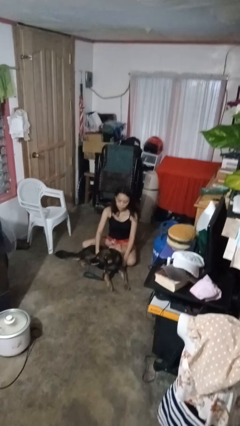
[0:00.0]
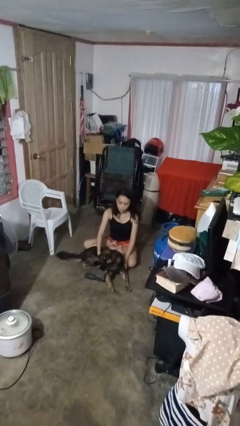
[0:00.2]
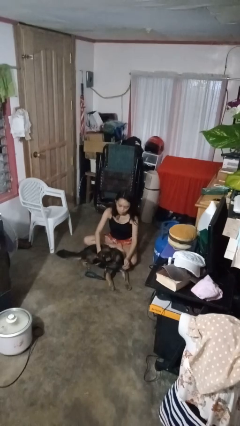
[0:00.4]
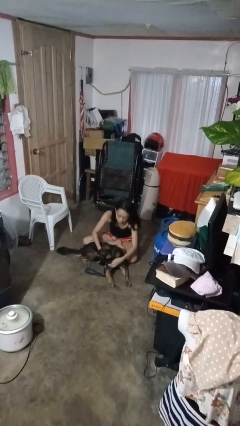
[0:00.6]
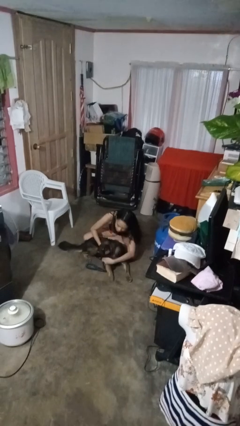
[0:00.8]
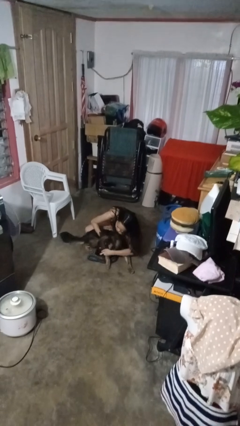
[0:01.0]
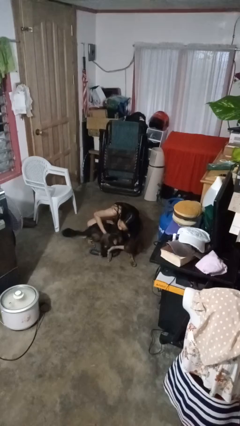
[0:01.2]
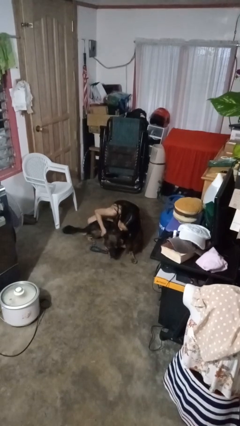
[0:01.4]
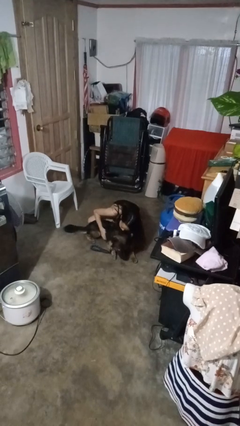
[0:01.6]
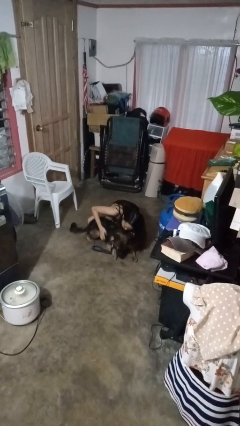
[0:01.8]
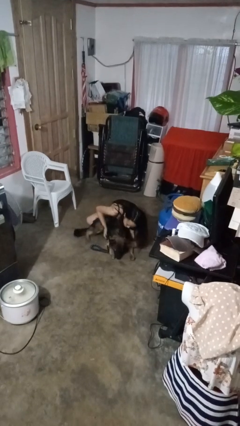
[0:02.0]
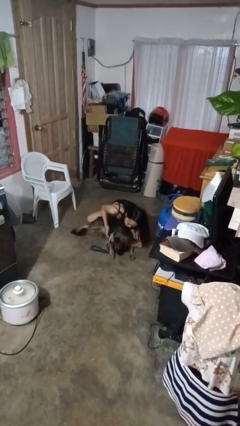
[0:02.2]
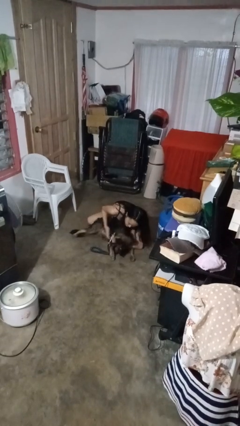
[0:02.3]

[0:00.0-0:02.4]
person hugs dog

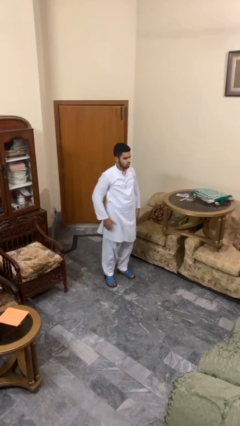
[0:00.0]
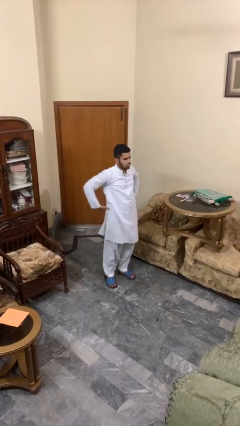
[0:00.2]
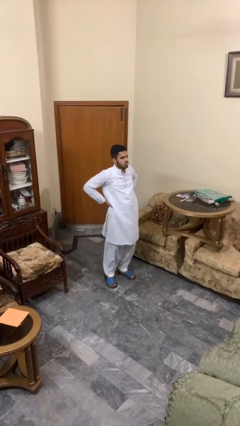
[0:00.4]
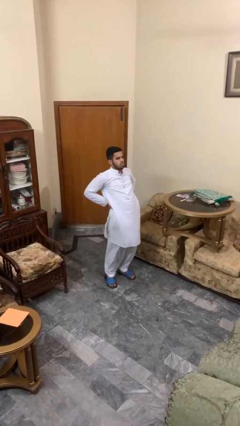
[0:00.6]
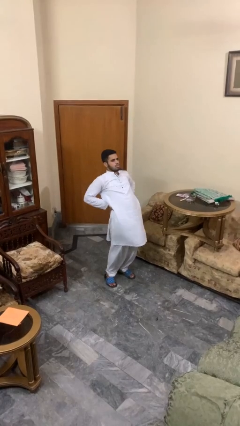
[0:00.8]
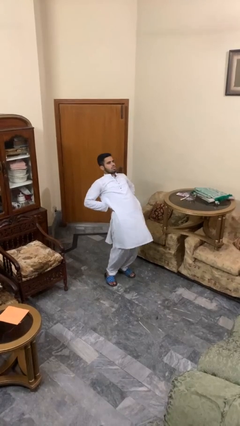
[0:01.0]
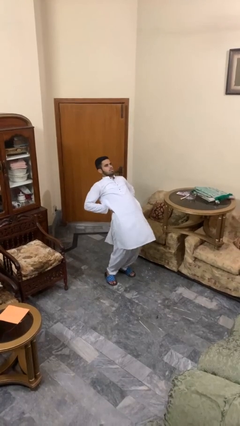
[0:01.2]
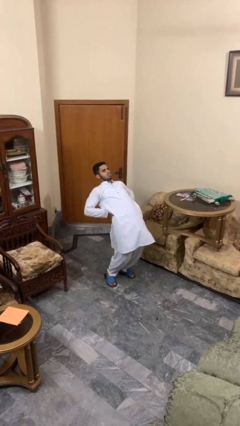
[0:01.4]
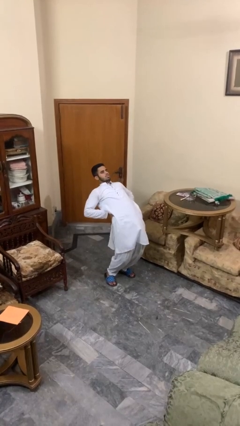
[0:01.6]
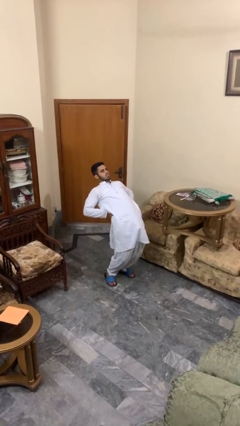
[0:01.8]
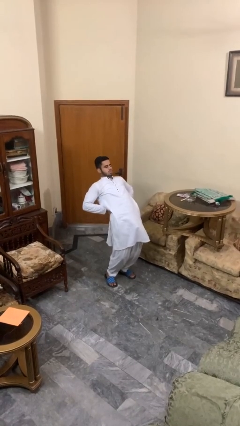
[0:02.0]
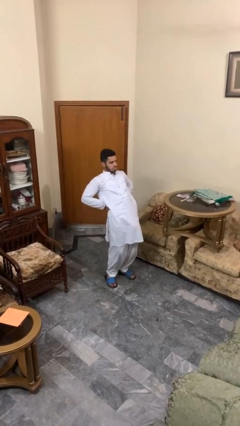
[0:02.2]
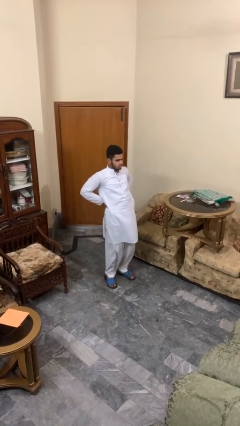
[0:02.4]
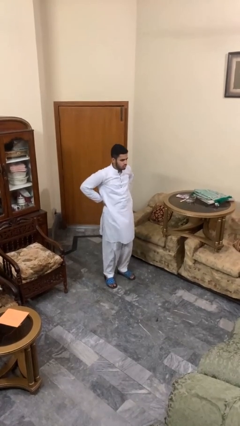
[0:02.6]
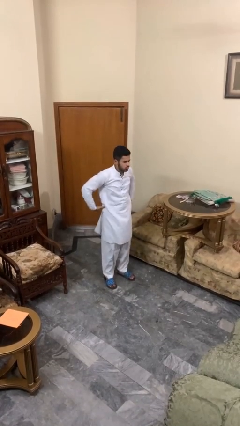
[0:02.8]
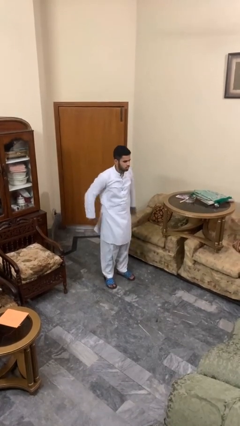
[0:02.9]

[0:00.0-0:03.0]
person stretches back

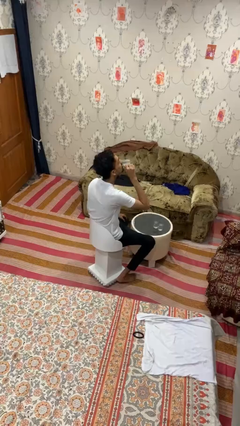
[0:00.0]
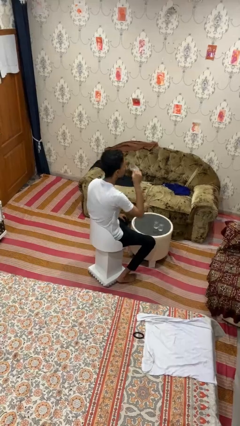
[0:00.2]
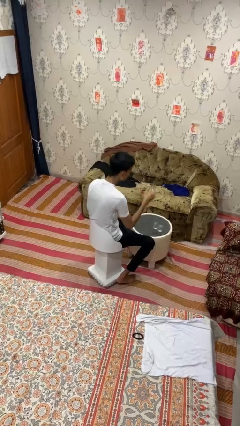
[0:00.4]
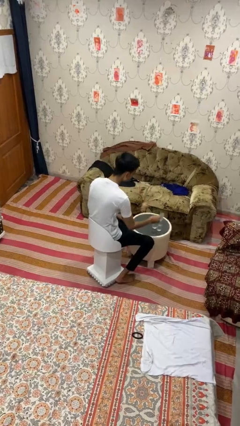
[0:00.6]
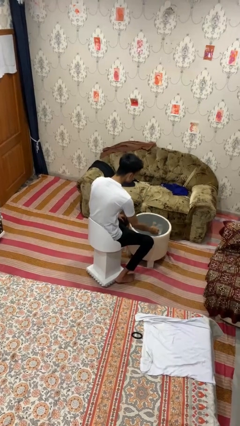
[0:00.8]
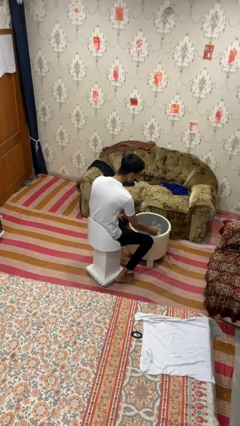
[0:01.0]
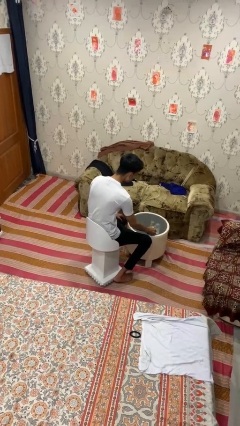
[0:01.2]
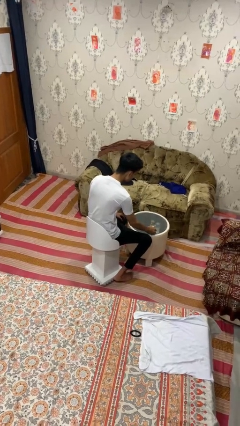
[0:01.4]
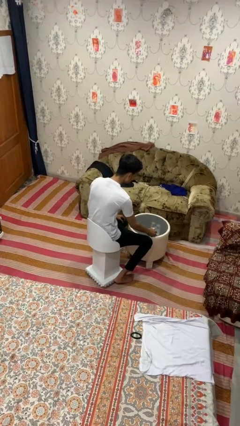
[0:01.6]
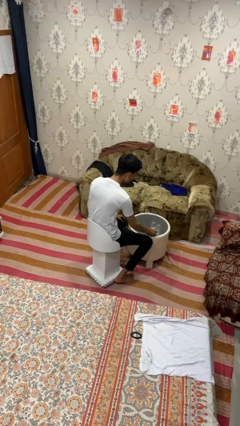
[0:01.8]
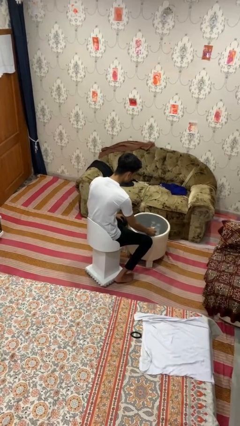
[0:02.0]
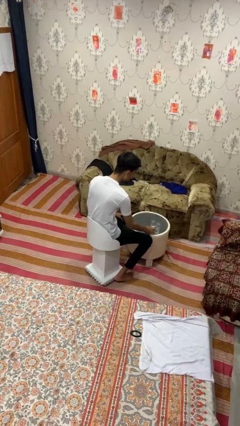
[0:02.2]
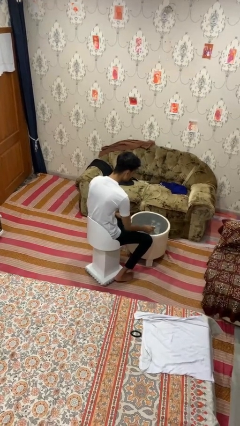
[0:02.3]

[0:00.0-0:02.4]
person puts down object on table

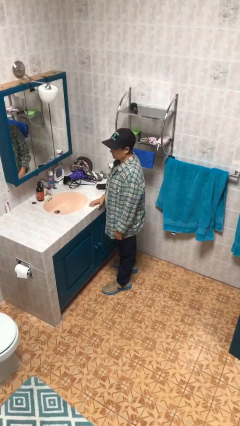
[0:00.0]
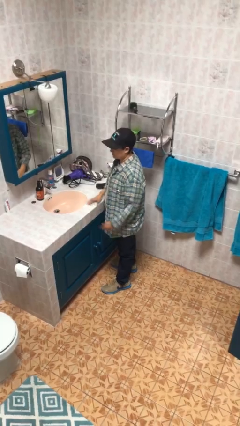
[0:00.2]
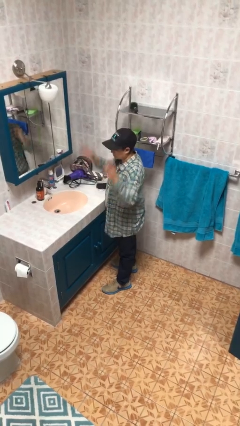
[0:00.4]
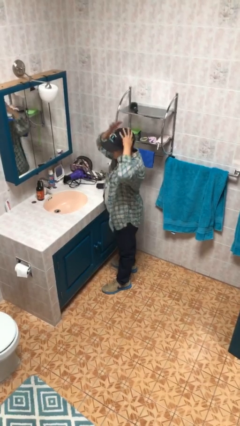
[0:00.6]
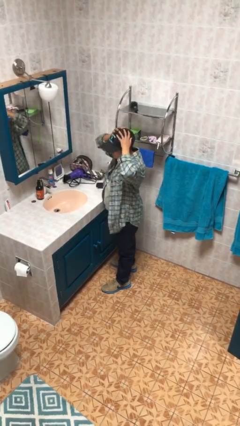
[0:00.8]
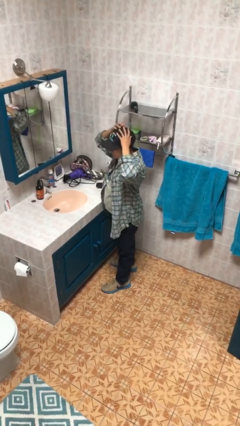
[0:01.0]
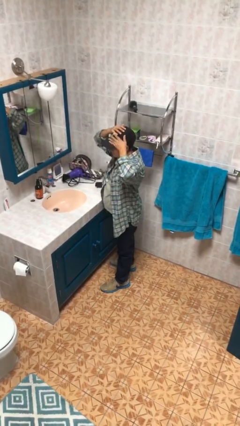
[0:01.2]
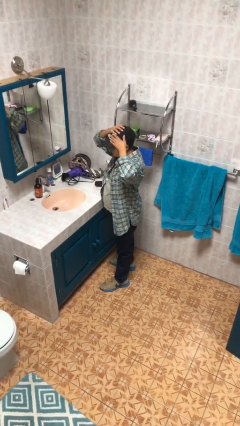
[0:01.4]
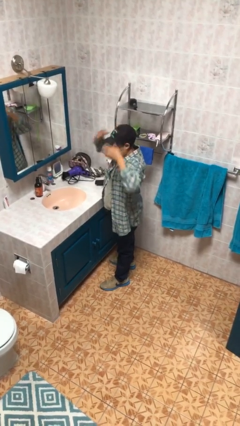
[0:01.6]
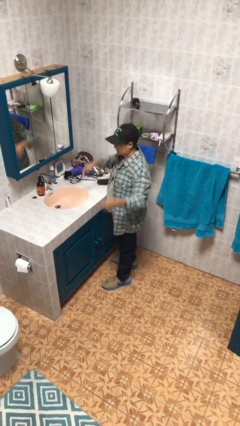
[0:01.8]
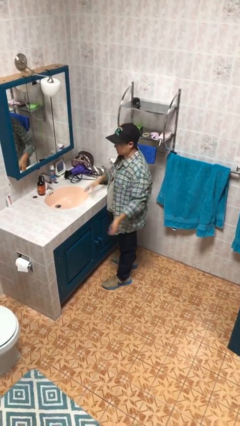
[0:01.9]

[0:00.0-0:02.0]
person pats head

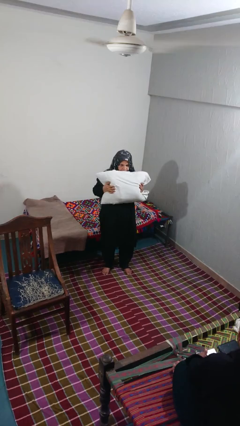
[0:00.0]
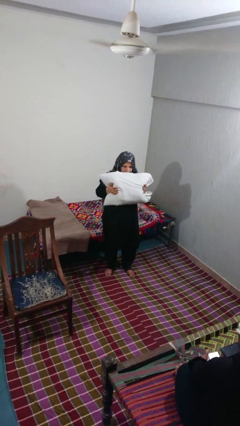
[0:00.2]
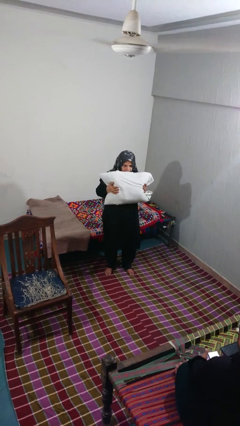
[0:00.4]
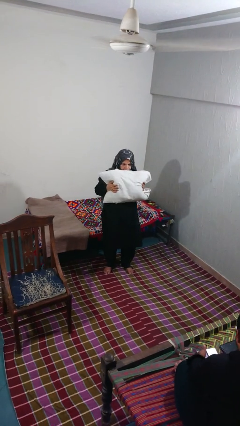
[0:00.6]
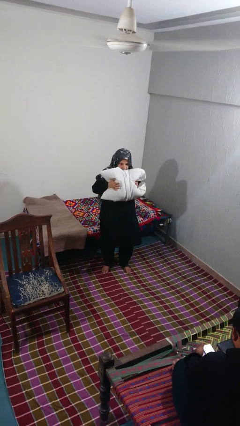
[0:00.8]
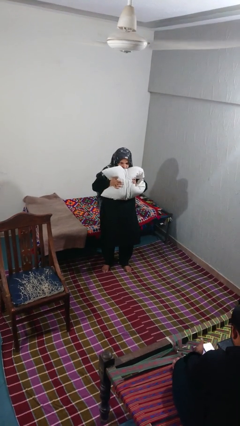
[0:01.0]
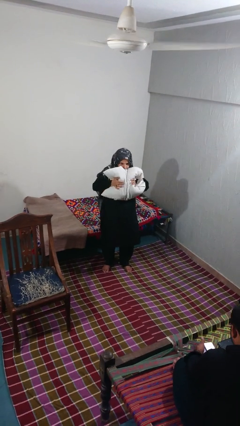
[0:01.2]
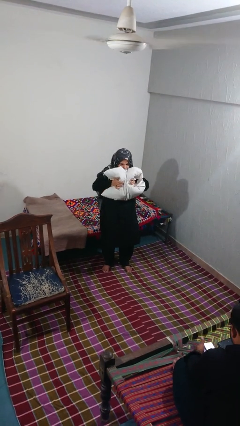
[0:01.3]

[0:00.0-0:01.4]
person squeezes object

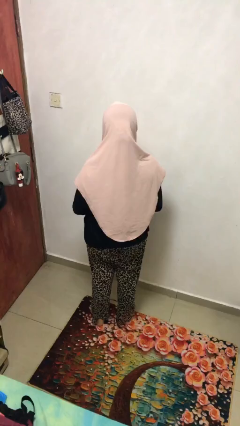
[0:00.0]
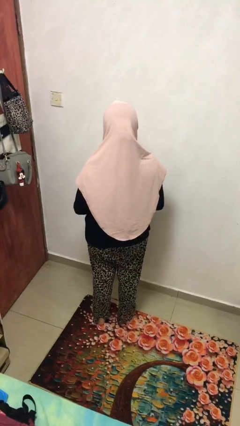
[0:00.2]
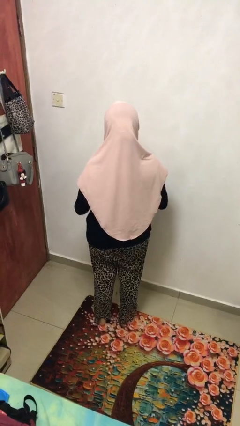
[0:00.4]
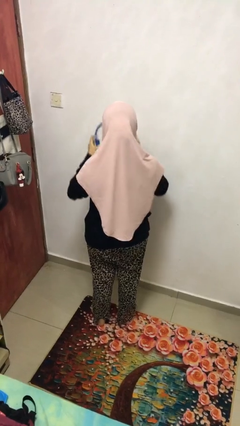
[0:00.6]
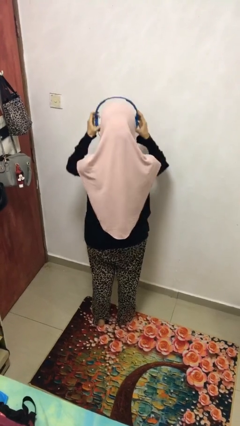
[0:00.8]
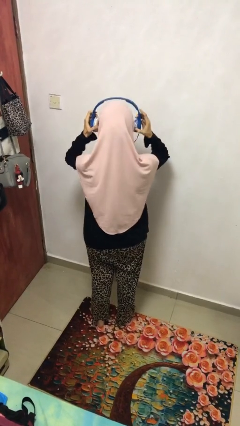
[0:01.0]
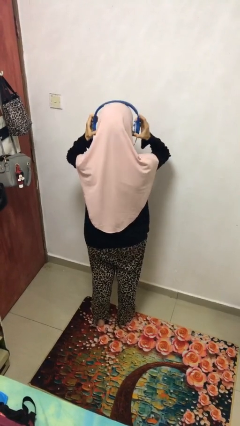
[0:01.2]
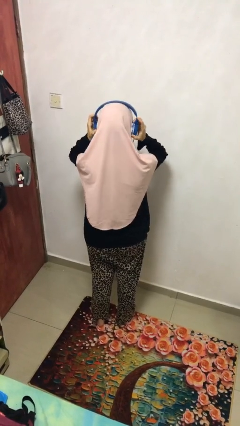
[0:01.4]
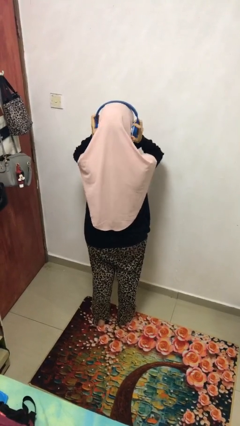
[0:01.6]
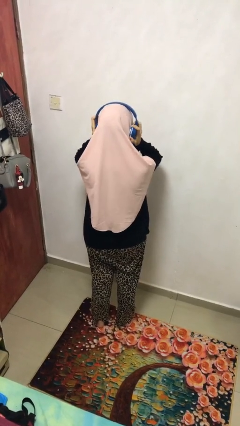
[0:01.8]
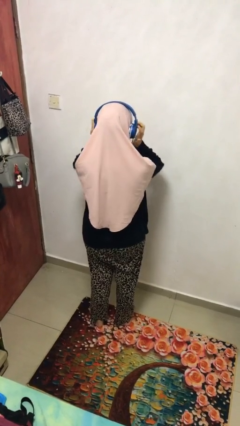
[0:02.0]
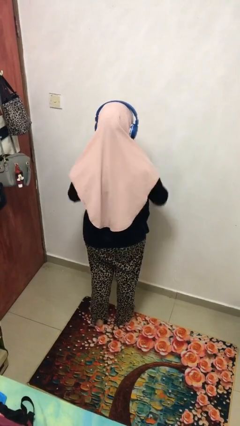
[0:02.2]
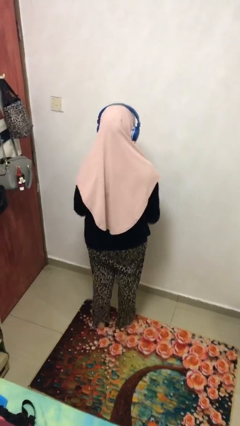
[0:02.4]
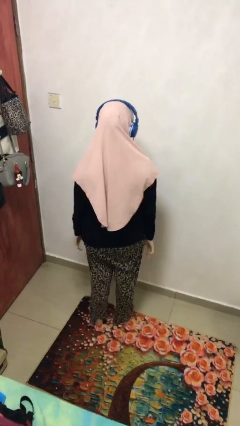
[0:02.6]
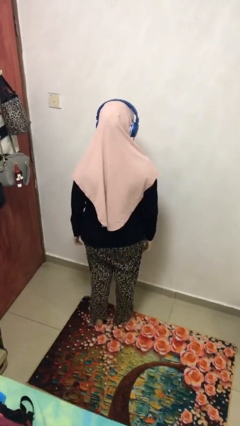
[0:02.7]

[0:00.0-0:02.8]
person puts on headphones

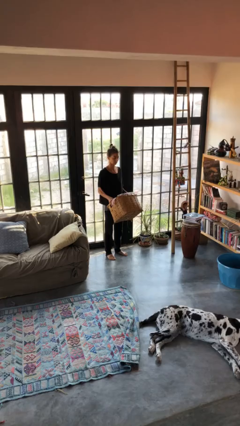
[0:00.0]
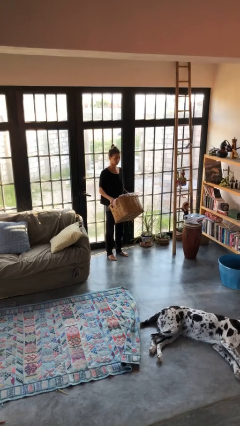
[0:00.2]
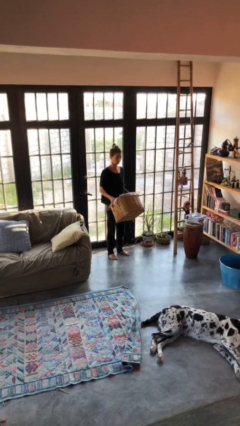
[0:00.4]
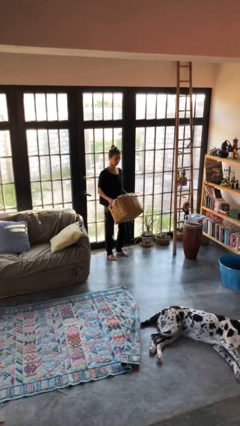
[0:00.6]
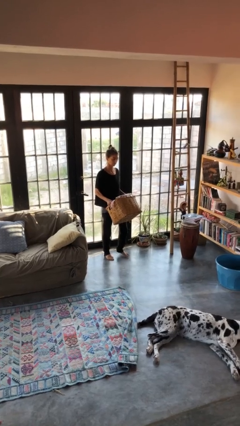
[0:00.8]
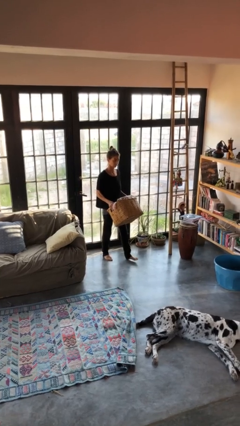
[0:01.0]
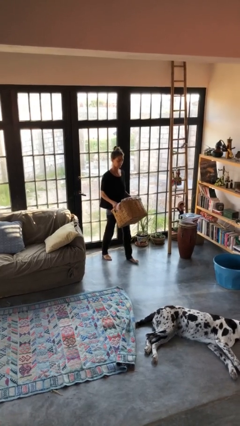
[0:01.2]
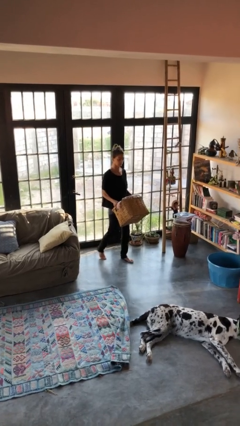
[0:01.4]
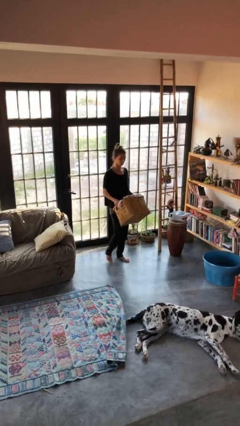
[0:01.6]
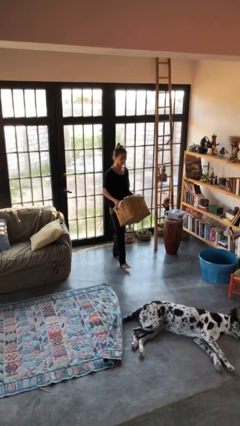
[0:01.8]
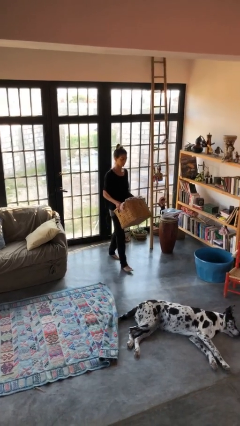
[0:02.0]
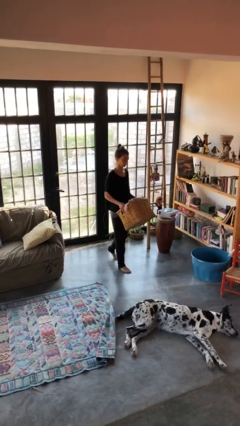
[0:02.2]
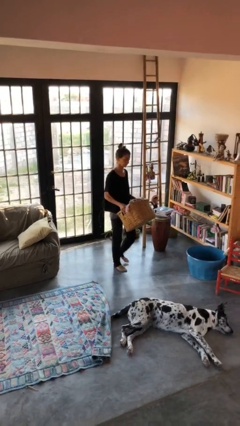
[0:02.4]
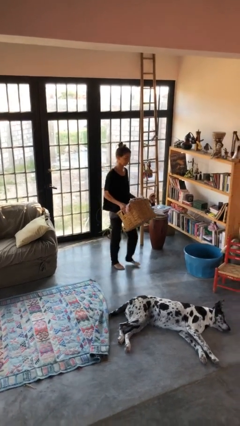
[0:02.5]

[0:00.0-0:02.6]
person carries laundry basket

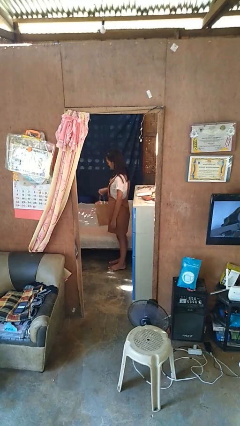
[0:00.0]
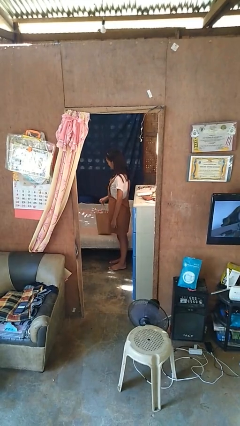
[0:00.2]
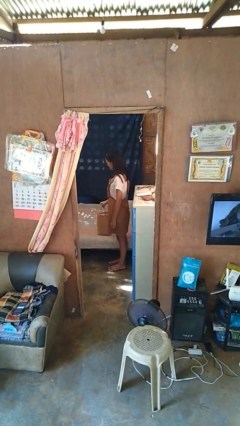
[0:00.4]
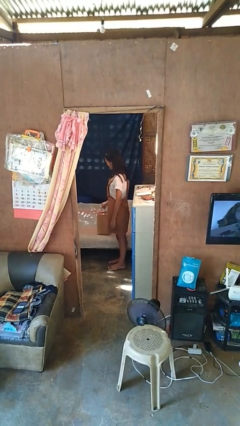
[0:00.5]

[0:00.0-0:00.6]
person puts down object on couch
